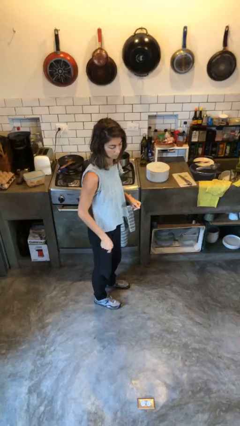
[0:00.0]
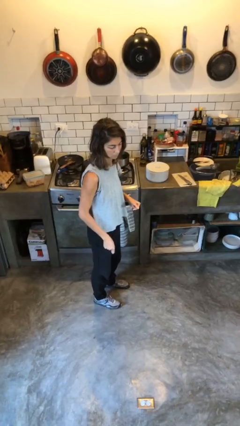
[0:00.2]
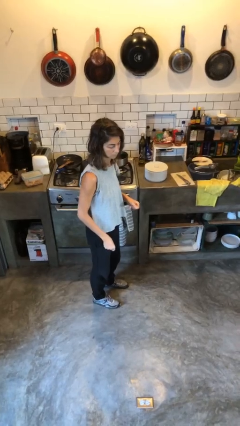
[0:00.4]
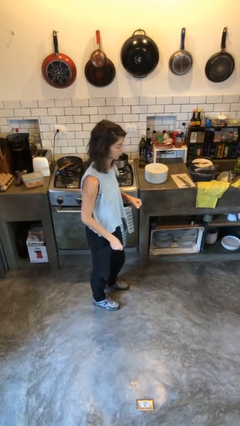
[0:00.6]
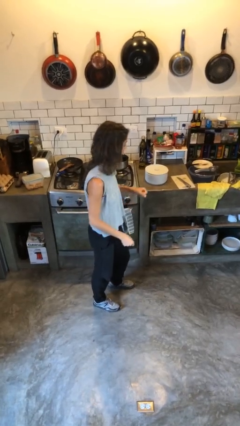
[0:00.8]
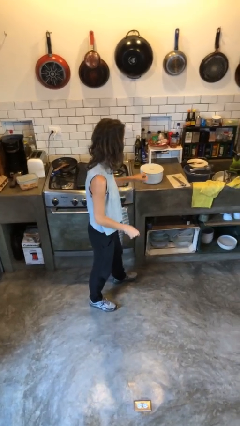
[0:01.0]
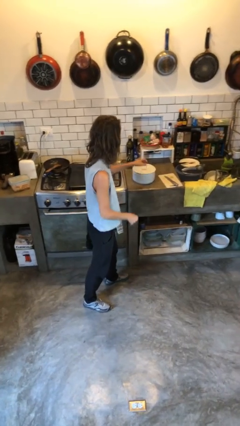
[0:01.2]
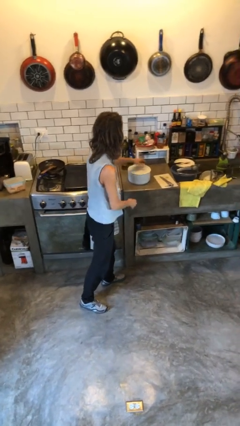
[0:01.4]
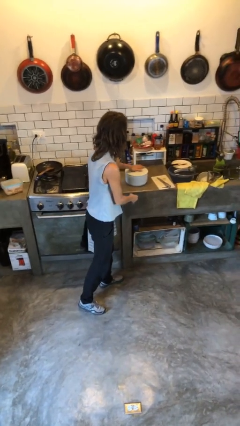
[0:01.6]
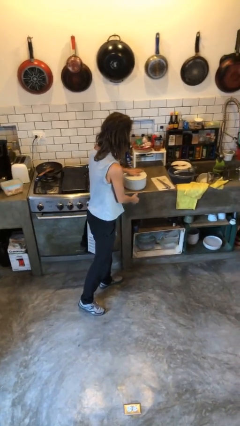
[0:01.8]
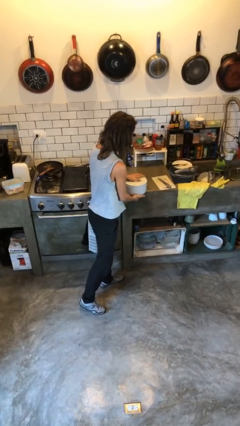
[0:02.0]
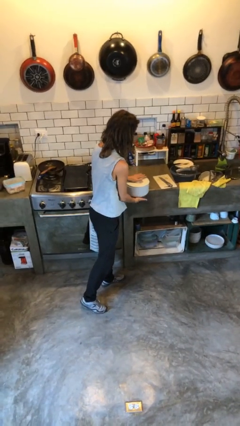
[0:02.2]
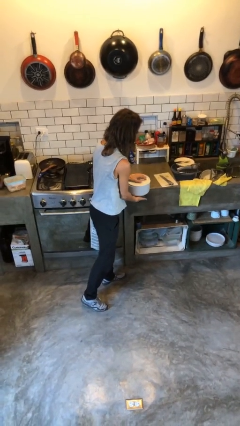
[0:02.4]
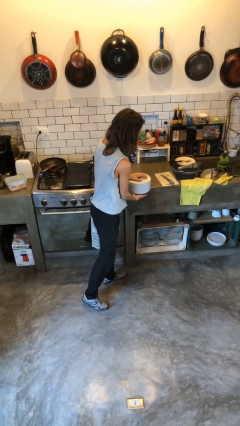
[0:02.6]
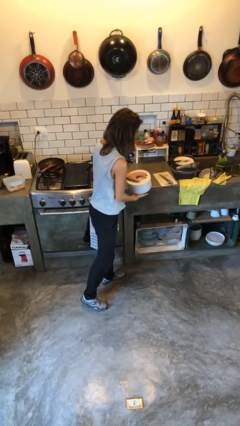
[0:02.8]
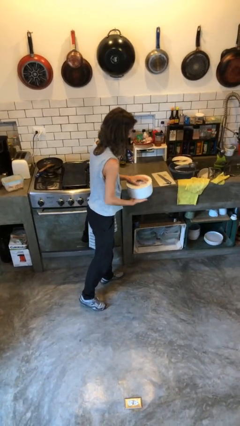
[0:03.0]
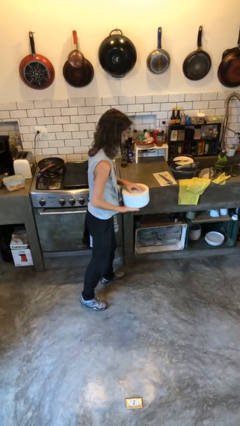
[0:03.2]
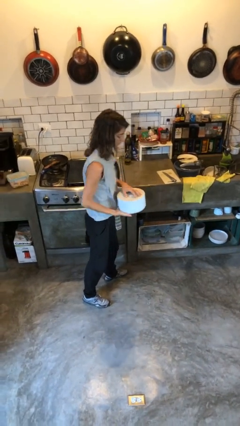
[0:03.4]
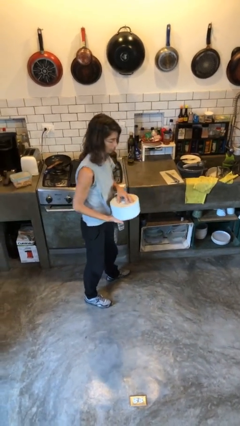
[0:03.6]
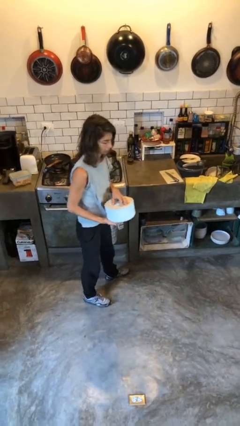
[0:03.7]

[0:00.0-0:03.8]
person picks up object from countertop

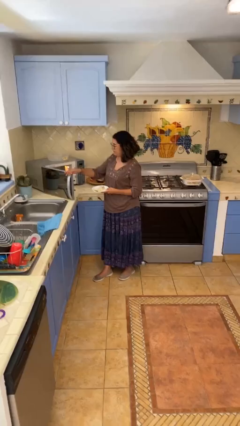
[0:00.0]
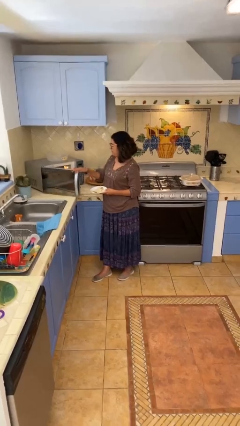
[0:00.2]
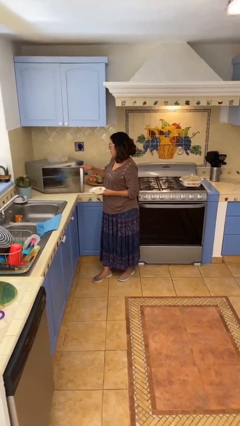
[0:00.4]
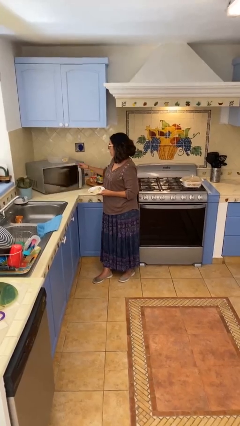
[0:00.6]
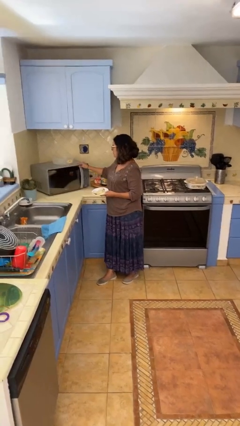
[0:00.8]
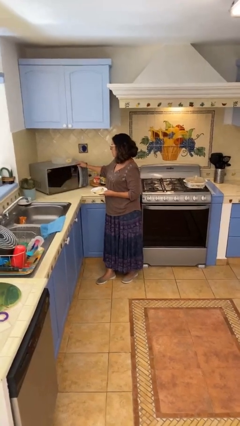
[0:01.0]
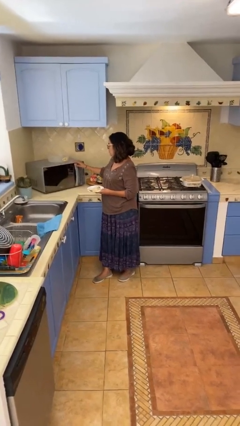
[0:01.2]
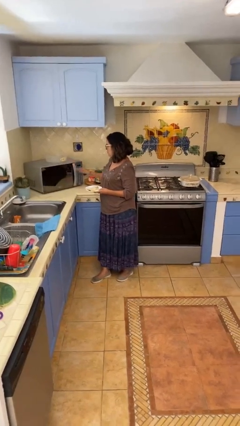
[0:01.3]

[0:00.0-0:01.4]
person closes microwave

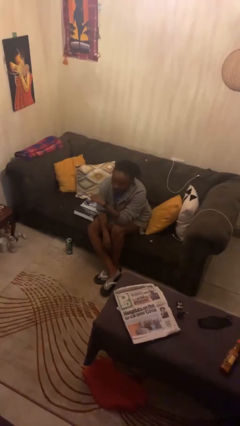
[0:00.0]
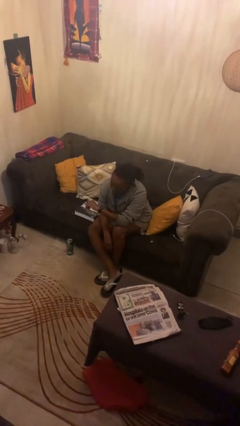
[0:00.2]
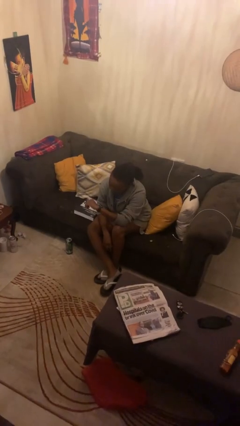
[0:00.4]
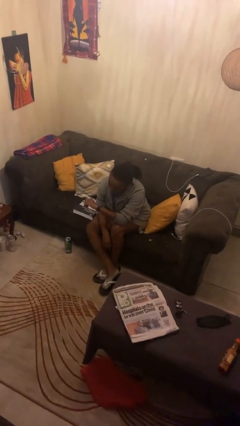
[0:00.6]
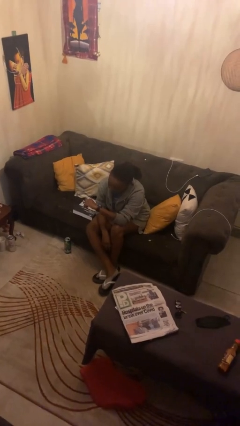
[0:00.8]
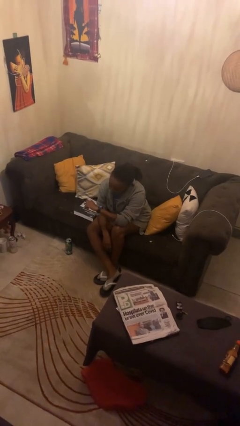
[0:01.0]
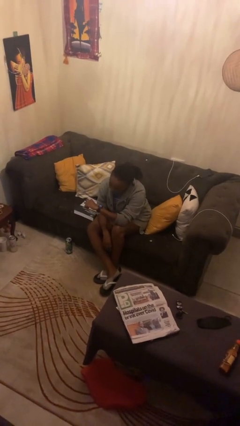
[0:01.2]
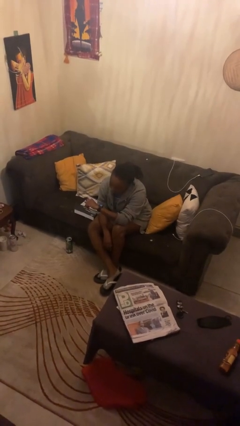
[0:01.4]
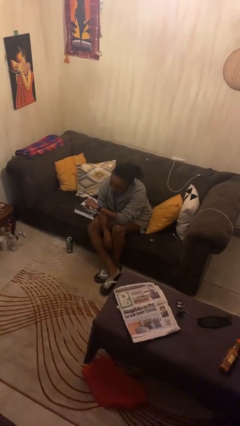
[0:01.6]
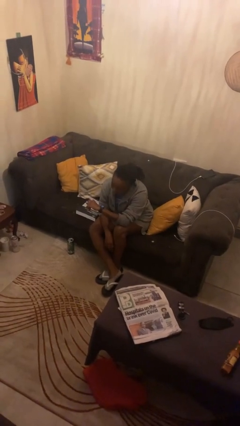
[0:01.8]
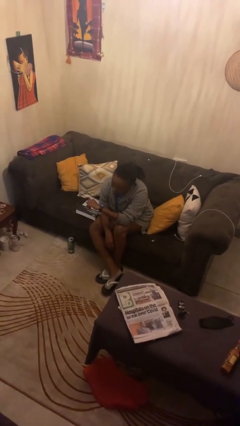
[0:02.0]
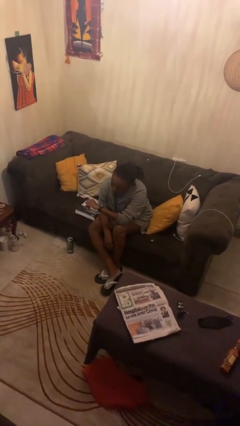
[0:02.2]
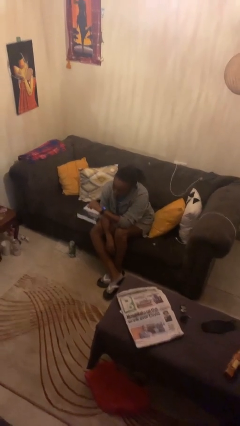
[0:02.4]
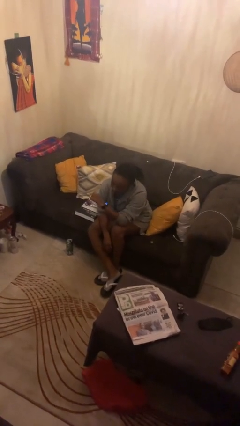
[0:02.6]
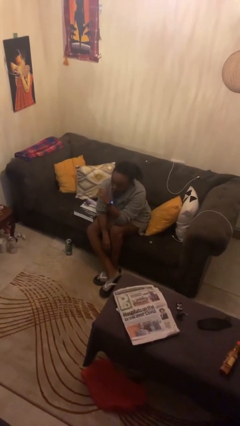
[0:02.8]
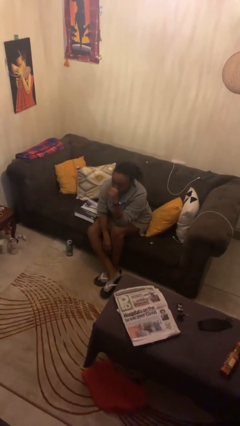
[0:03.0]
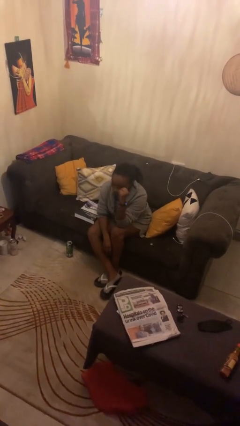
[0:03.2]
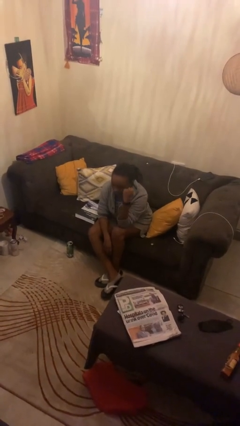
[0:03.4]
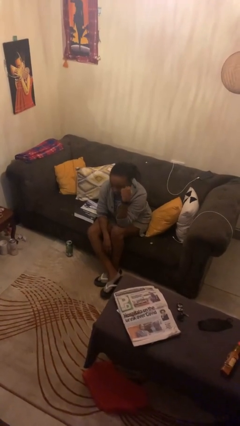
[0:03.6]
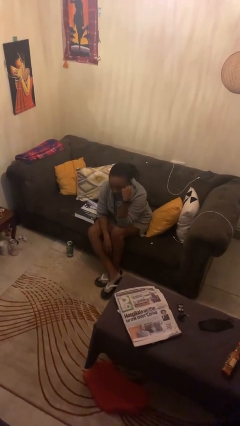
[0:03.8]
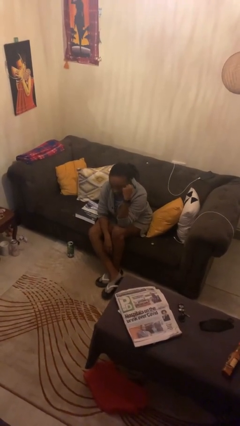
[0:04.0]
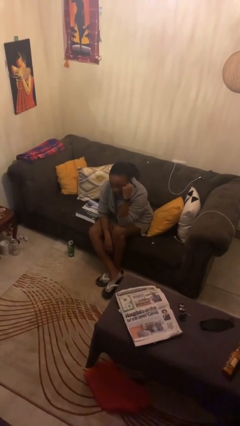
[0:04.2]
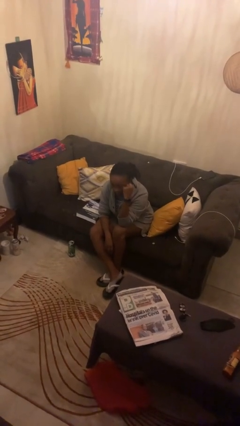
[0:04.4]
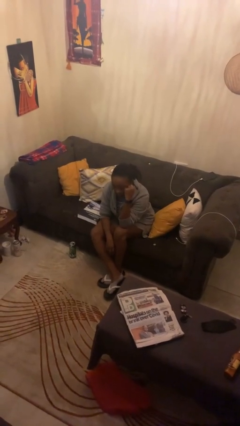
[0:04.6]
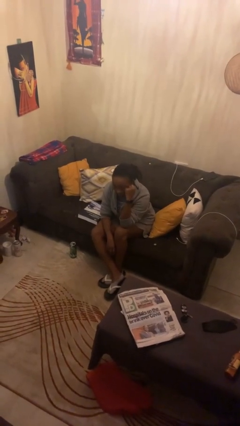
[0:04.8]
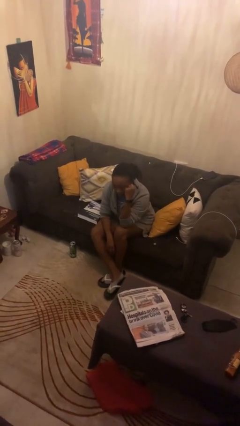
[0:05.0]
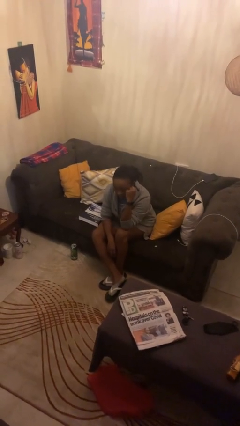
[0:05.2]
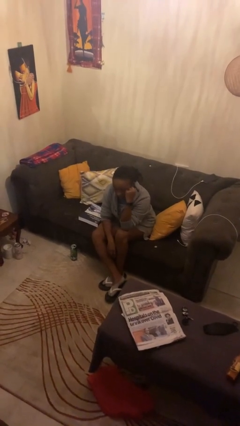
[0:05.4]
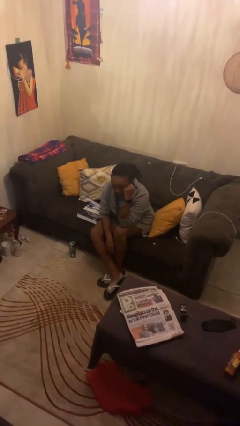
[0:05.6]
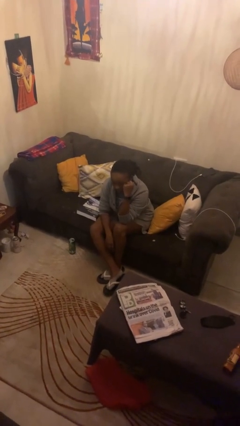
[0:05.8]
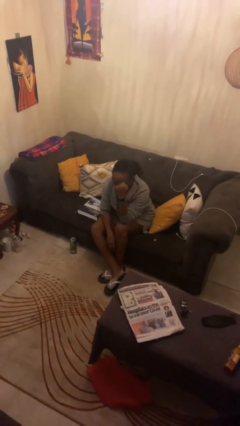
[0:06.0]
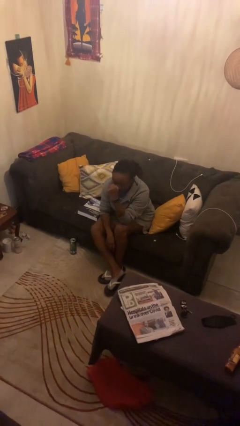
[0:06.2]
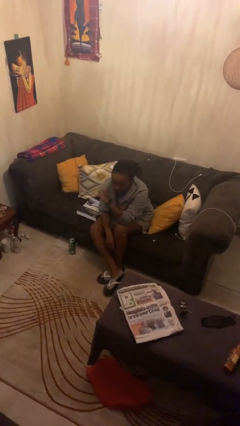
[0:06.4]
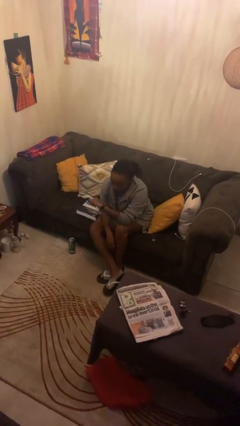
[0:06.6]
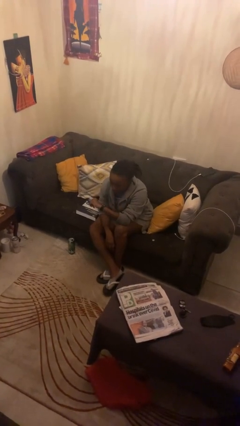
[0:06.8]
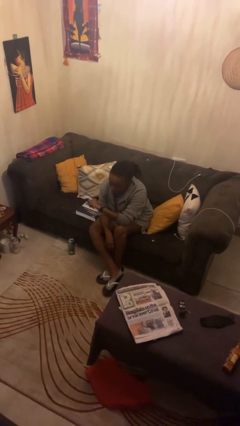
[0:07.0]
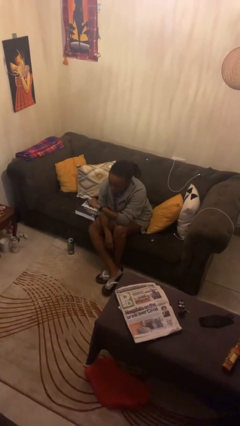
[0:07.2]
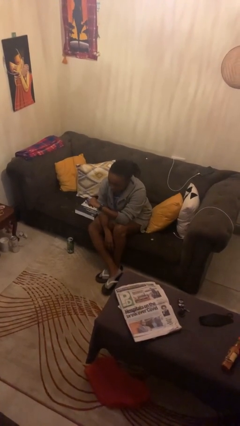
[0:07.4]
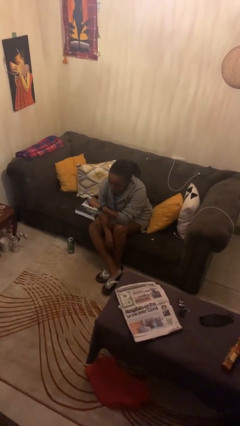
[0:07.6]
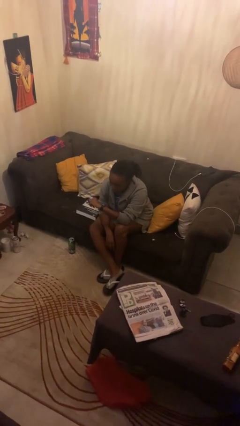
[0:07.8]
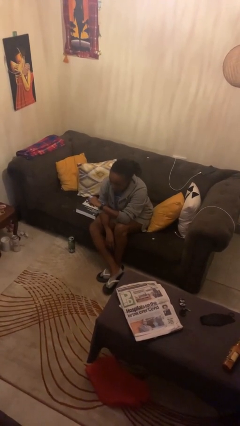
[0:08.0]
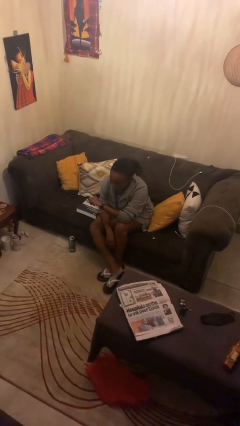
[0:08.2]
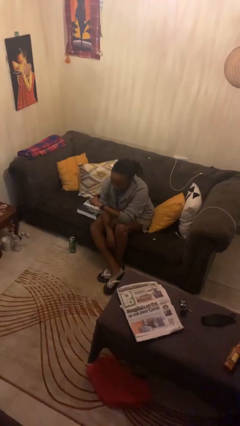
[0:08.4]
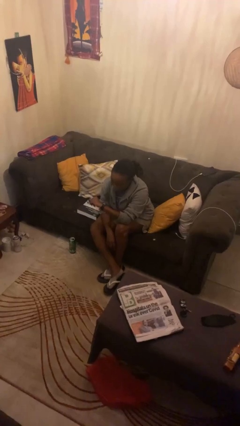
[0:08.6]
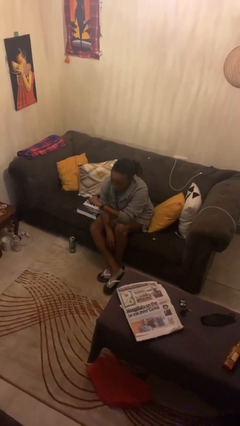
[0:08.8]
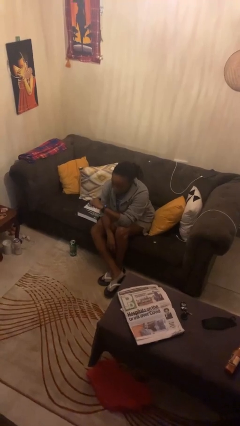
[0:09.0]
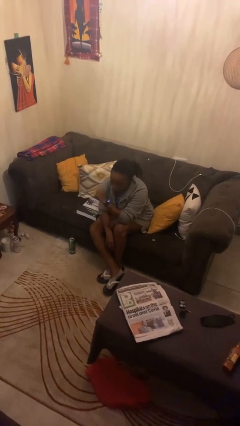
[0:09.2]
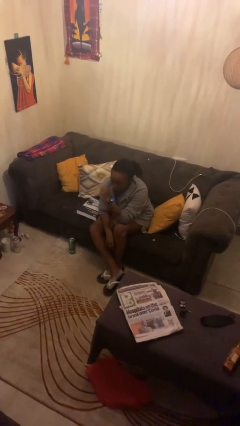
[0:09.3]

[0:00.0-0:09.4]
person looks at wristwatch

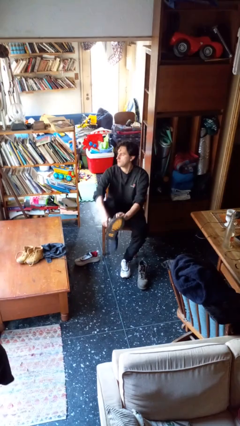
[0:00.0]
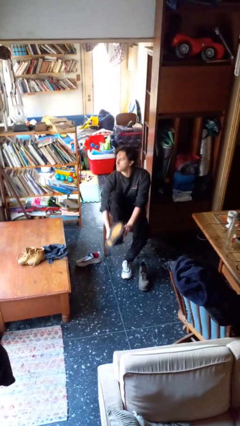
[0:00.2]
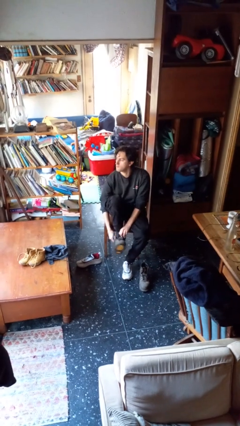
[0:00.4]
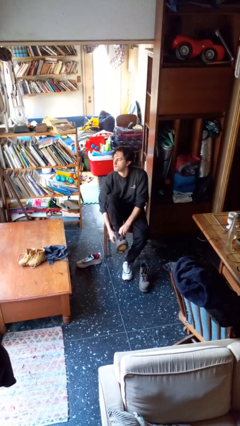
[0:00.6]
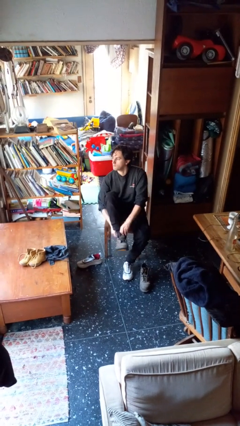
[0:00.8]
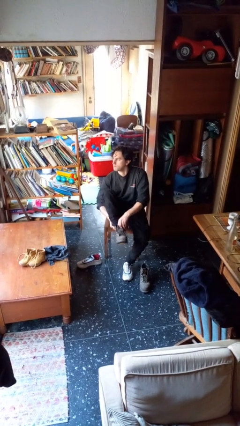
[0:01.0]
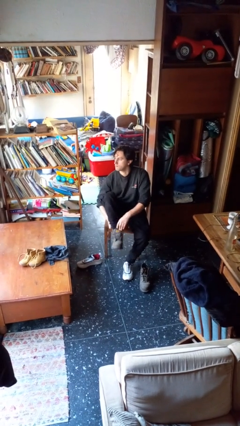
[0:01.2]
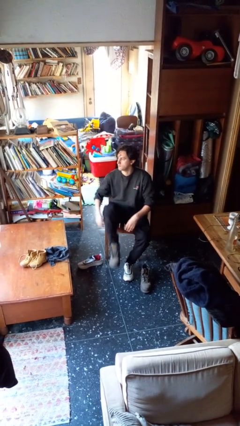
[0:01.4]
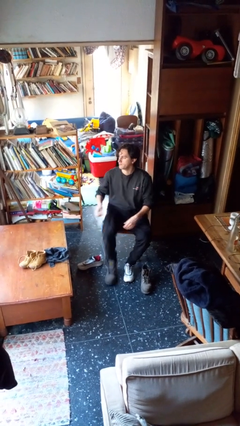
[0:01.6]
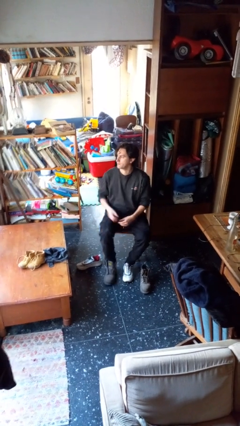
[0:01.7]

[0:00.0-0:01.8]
person puts on boots

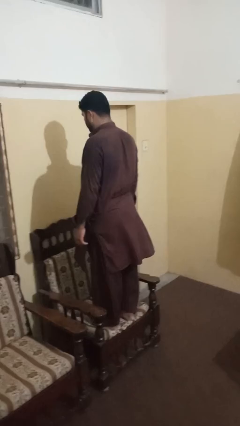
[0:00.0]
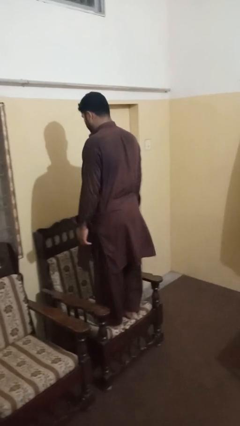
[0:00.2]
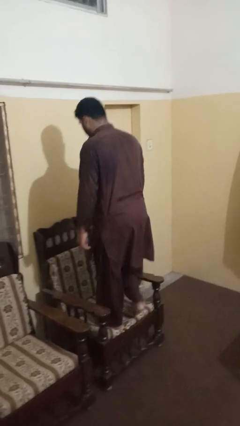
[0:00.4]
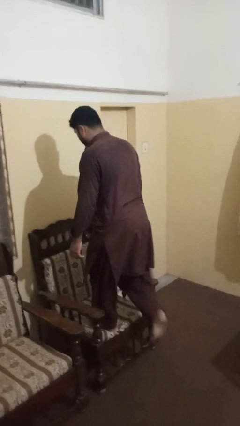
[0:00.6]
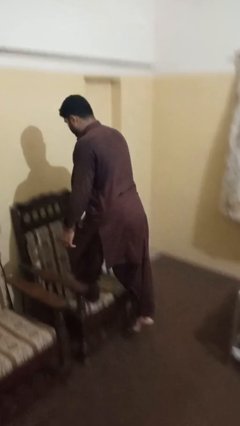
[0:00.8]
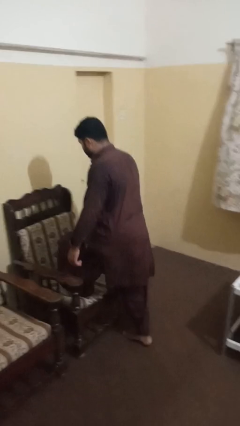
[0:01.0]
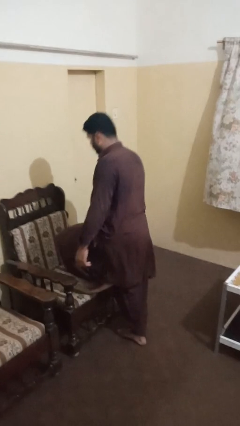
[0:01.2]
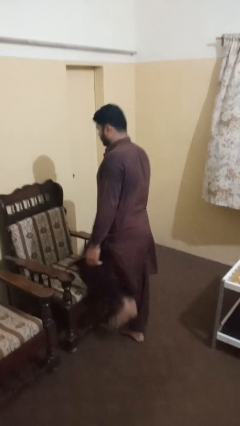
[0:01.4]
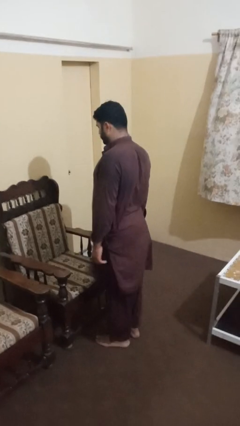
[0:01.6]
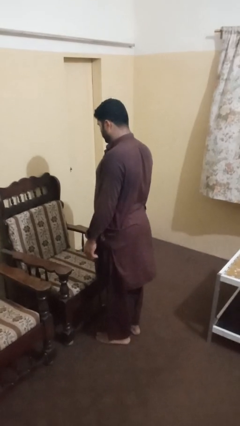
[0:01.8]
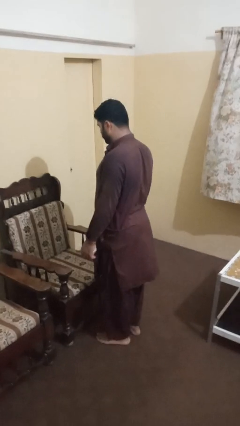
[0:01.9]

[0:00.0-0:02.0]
person climbs off chair
